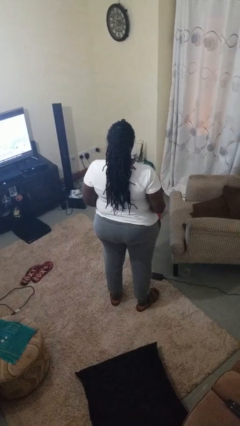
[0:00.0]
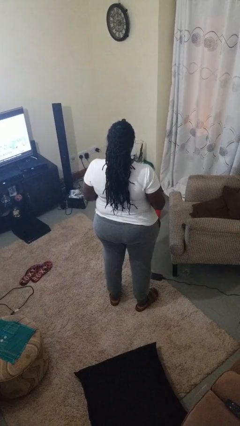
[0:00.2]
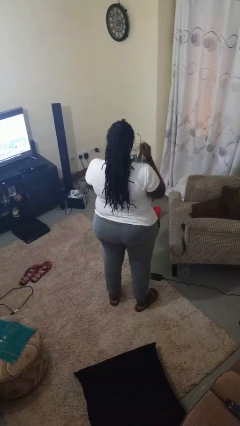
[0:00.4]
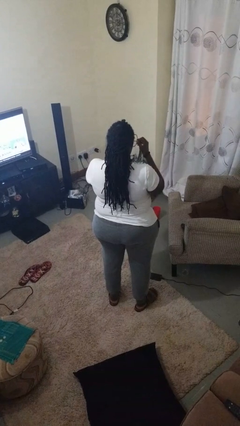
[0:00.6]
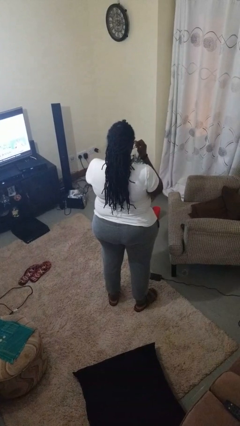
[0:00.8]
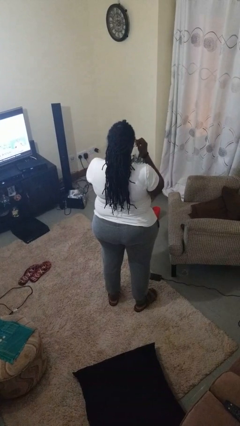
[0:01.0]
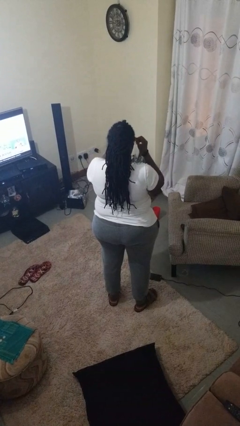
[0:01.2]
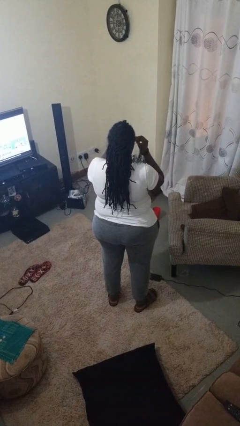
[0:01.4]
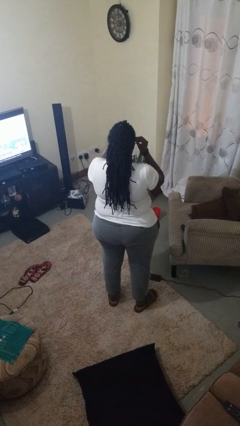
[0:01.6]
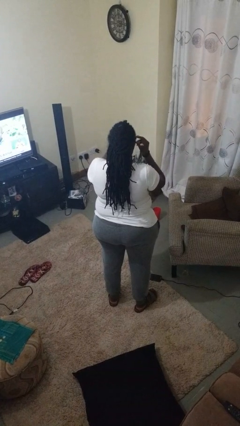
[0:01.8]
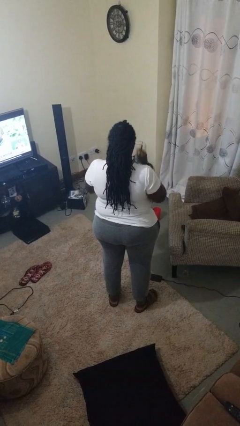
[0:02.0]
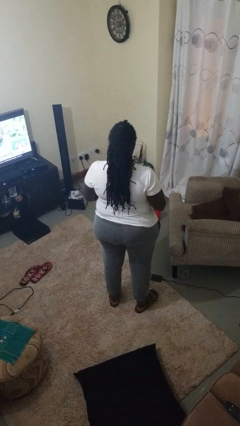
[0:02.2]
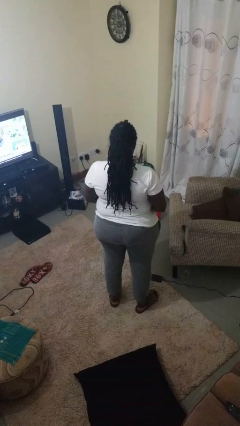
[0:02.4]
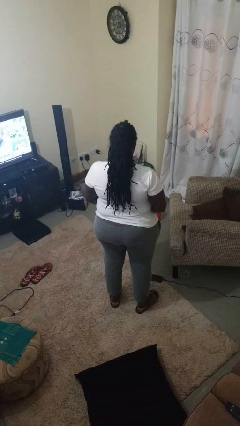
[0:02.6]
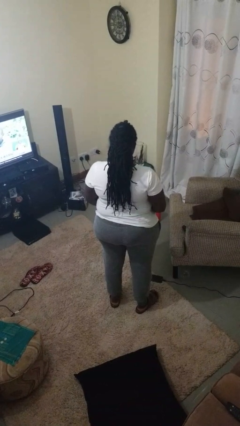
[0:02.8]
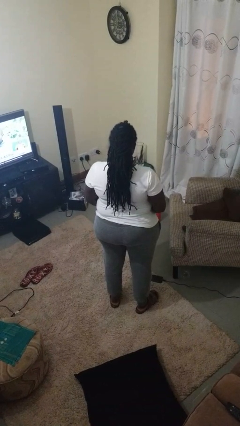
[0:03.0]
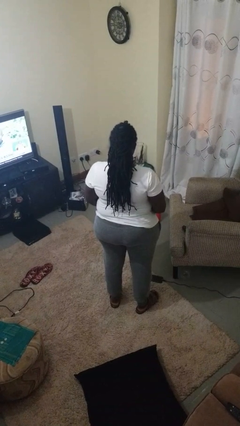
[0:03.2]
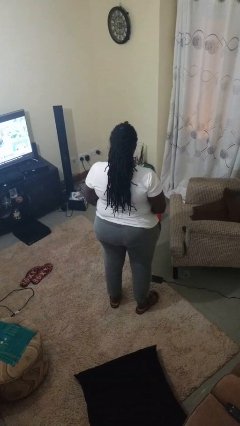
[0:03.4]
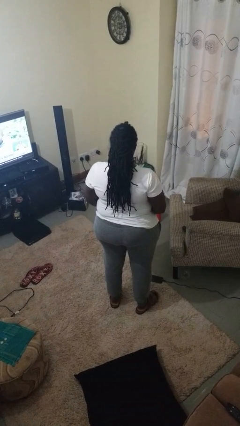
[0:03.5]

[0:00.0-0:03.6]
person puts on sunglasses

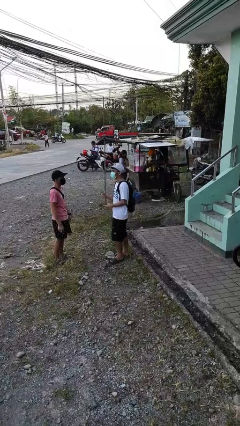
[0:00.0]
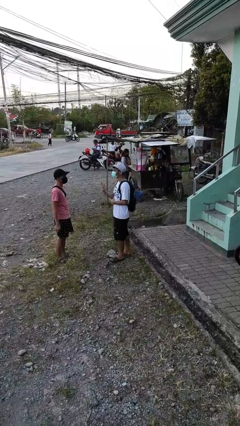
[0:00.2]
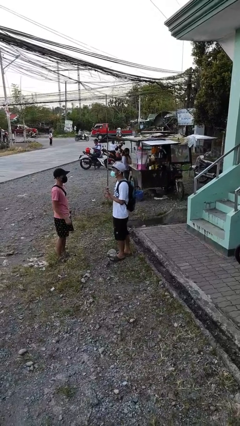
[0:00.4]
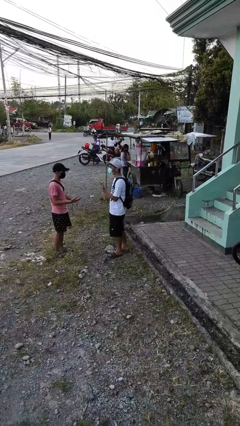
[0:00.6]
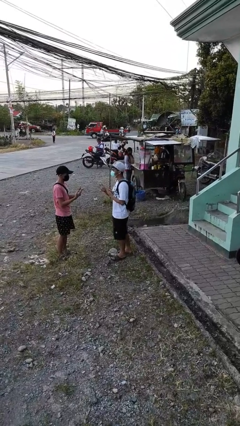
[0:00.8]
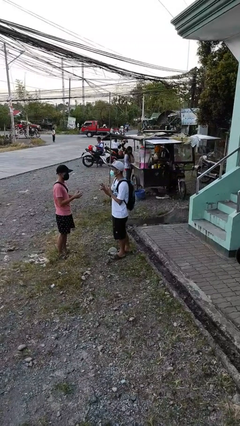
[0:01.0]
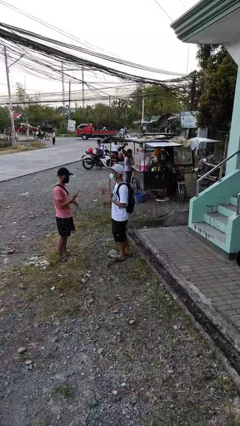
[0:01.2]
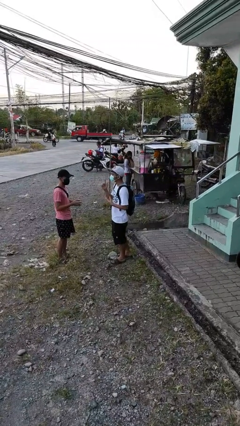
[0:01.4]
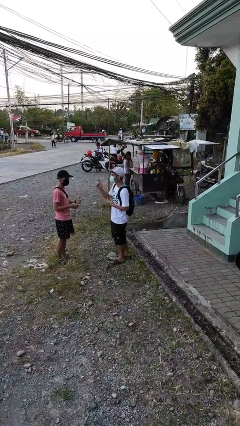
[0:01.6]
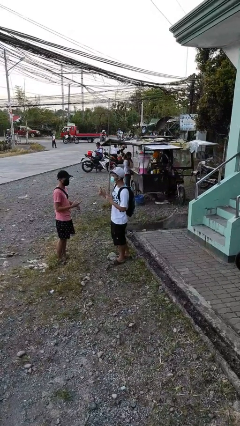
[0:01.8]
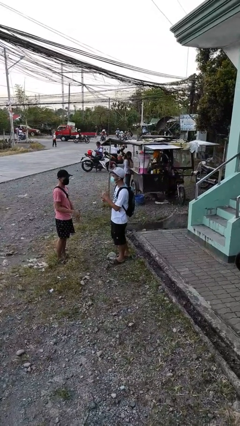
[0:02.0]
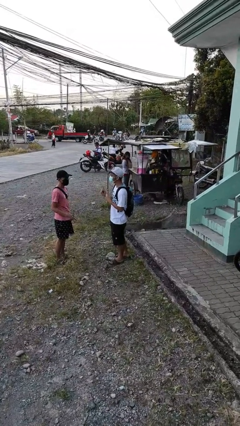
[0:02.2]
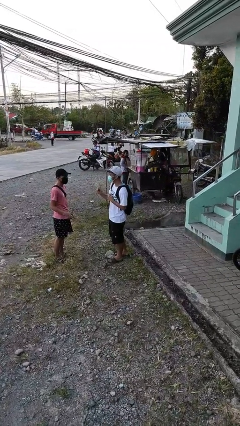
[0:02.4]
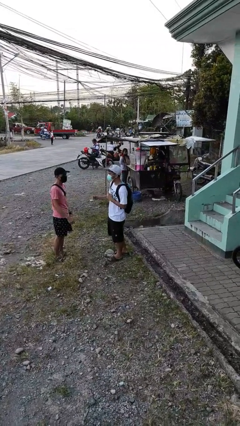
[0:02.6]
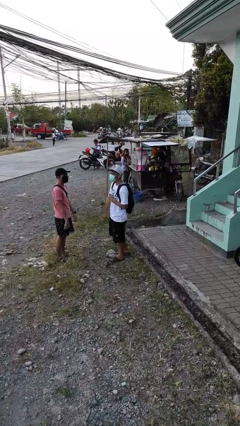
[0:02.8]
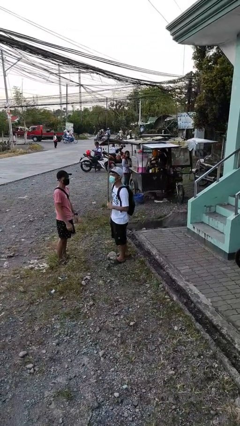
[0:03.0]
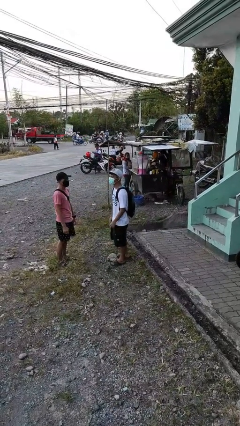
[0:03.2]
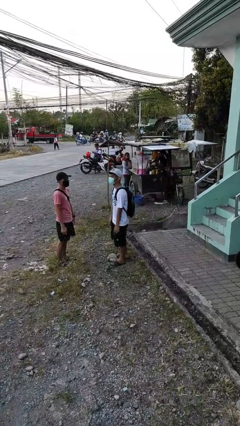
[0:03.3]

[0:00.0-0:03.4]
person talks to person

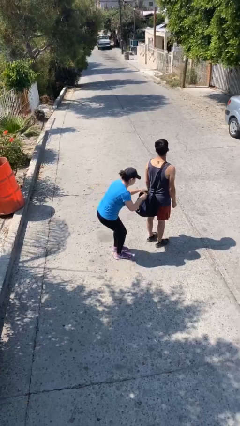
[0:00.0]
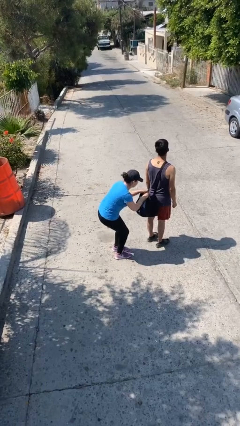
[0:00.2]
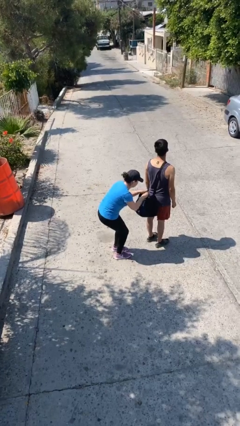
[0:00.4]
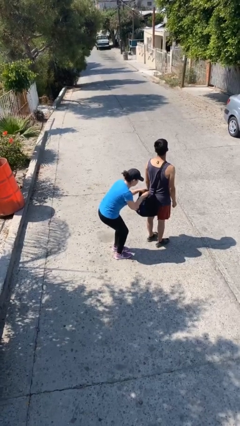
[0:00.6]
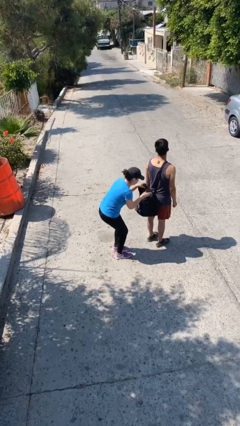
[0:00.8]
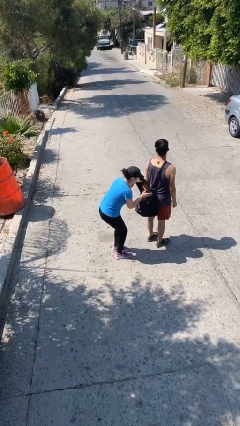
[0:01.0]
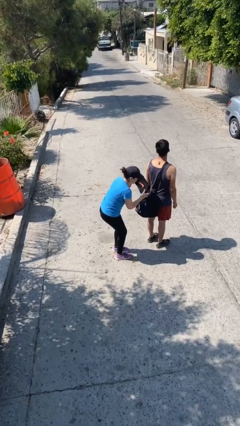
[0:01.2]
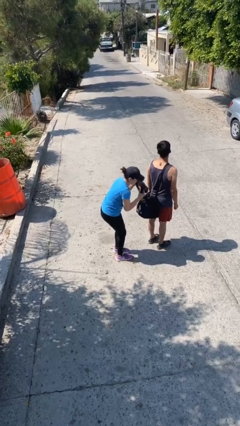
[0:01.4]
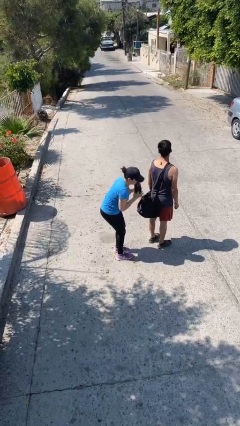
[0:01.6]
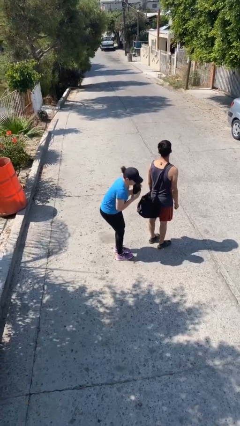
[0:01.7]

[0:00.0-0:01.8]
person steals object from person

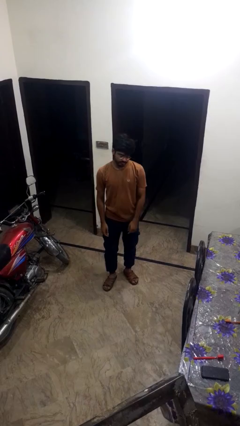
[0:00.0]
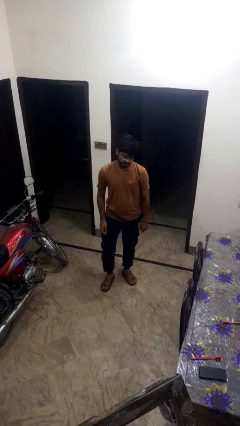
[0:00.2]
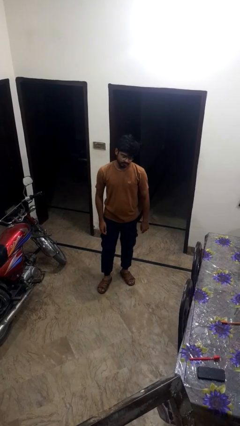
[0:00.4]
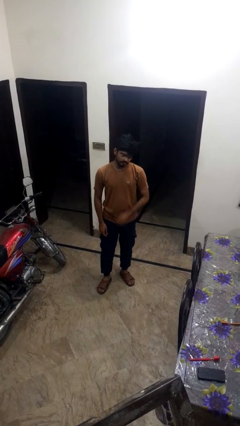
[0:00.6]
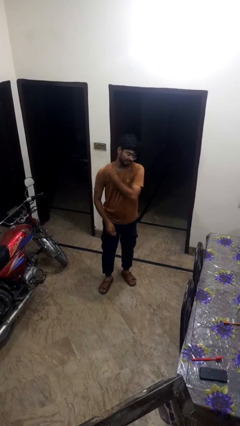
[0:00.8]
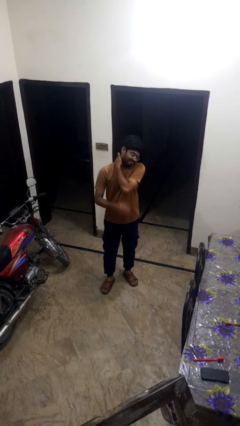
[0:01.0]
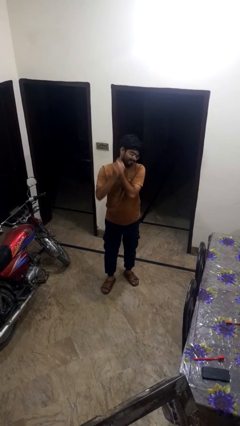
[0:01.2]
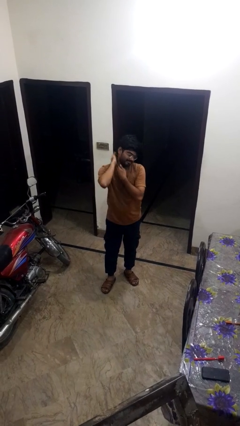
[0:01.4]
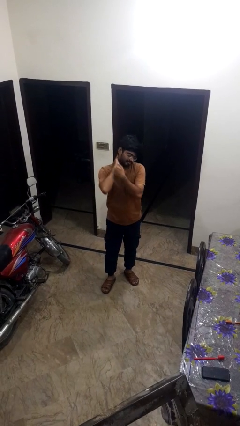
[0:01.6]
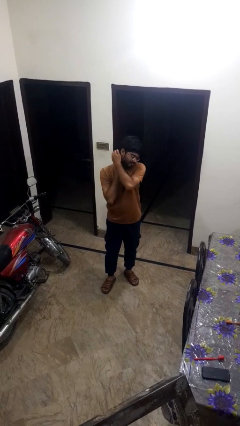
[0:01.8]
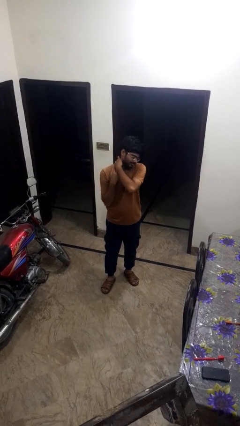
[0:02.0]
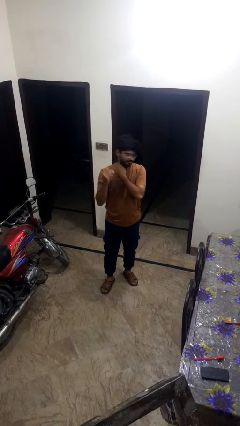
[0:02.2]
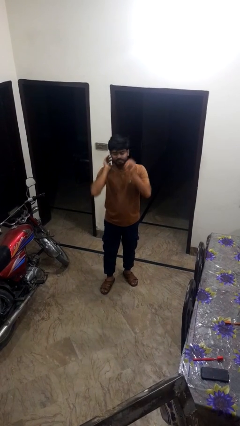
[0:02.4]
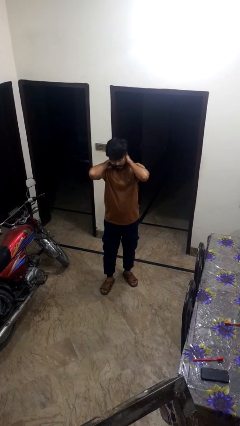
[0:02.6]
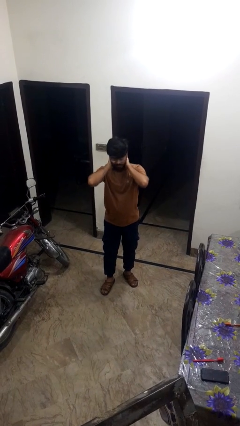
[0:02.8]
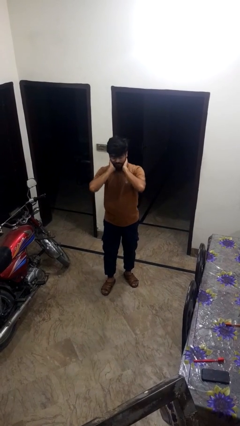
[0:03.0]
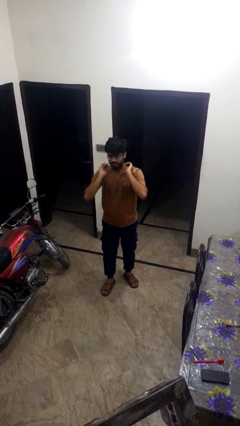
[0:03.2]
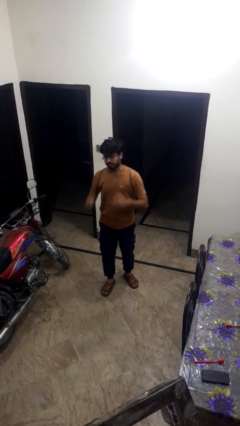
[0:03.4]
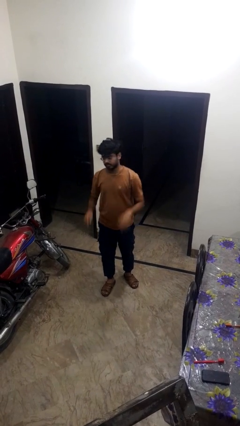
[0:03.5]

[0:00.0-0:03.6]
person rubs neck

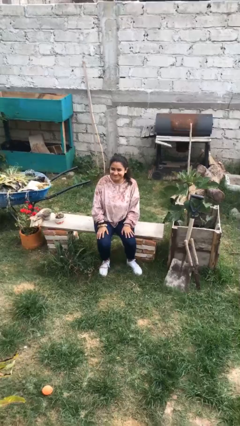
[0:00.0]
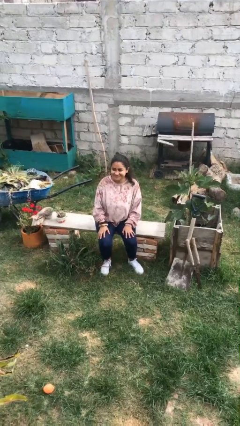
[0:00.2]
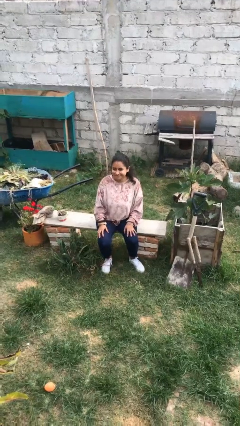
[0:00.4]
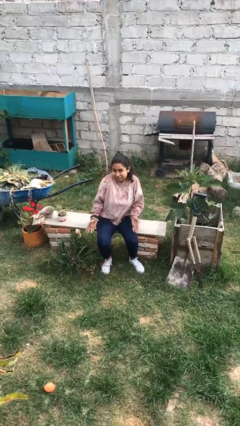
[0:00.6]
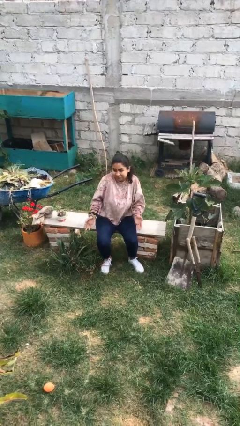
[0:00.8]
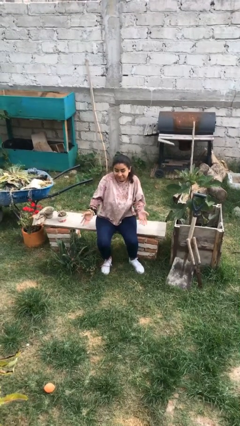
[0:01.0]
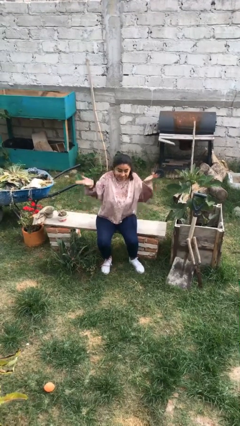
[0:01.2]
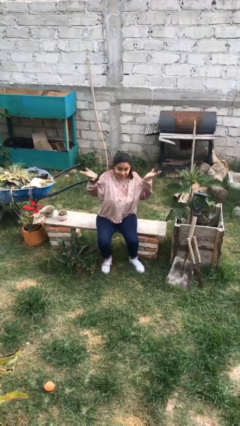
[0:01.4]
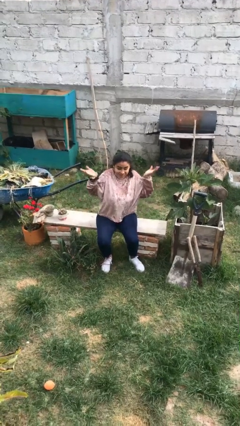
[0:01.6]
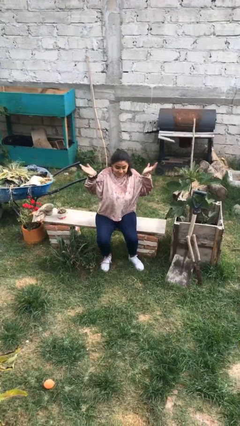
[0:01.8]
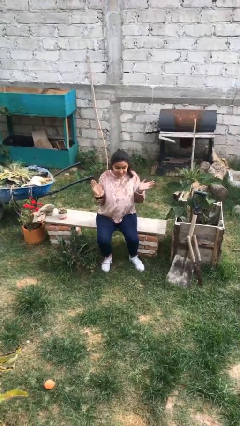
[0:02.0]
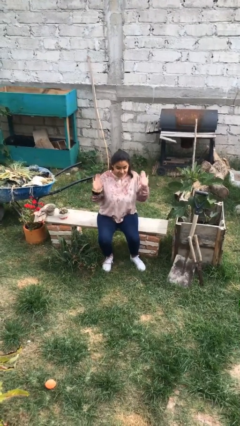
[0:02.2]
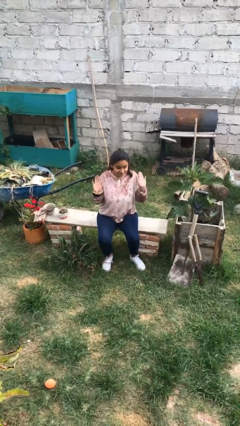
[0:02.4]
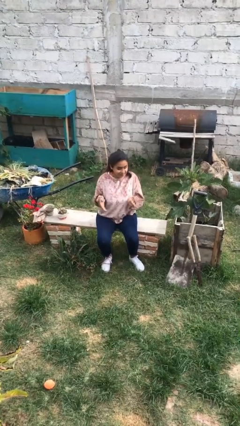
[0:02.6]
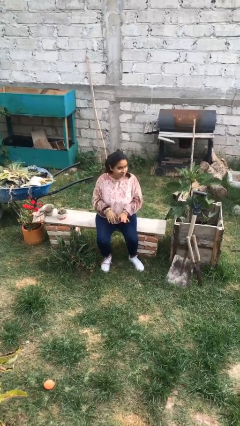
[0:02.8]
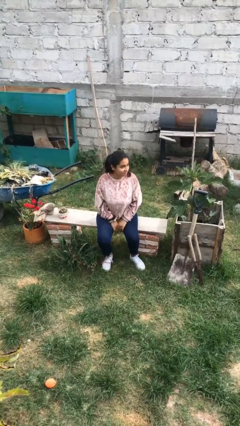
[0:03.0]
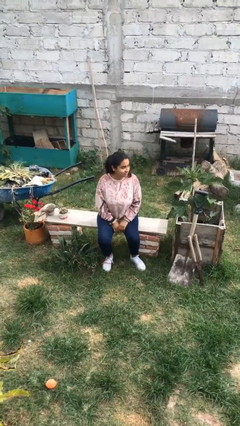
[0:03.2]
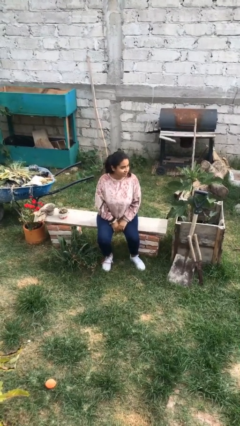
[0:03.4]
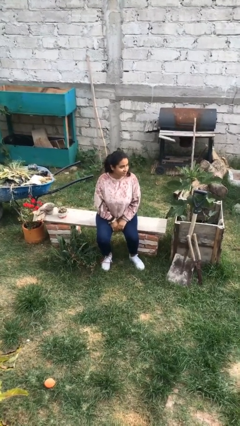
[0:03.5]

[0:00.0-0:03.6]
person shrugs

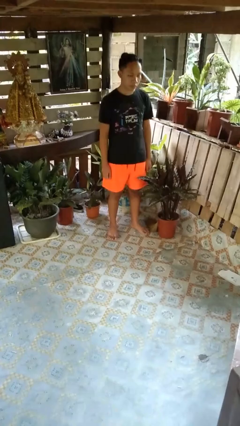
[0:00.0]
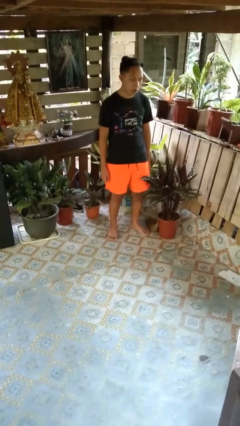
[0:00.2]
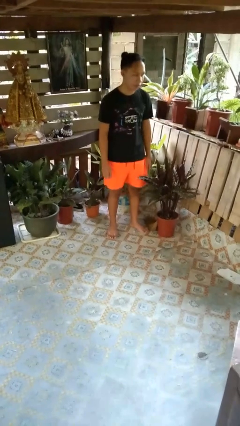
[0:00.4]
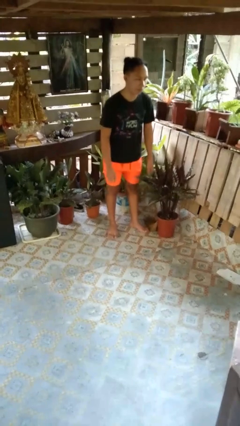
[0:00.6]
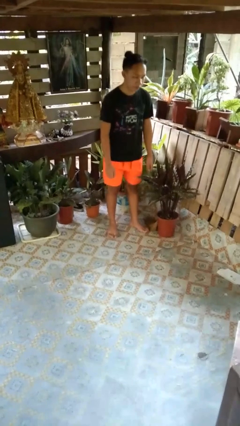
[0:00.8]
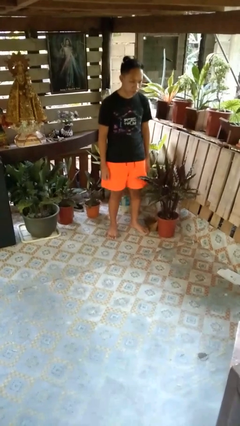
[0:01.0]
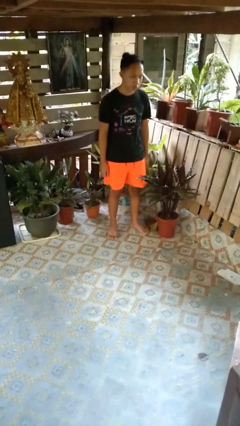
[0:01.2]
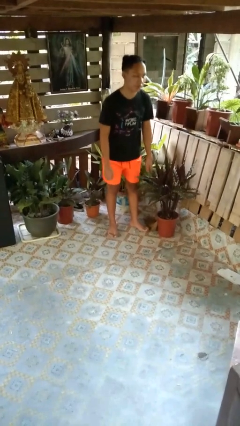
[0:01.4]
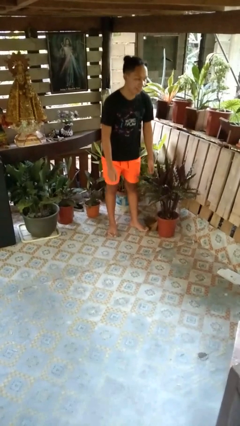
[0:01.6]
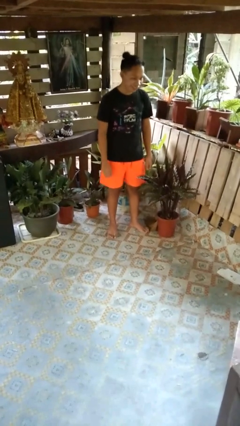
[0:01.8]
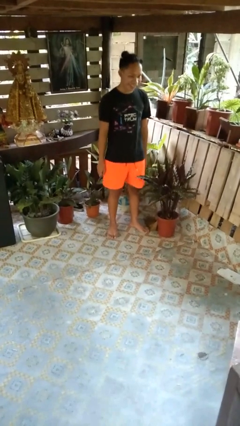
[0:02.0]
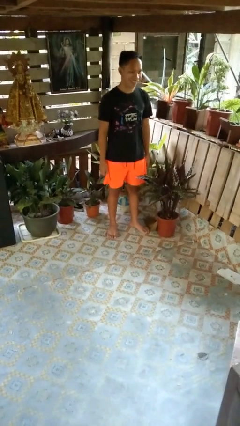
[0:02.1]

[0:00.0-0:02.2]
person wiggles hips
